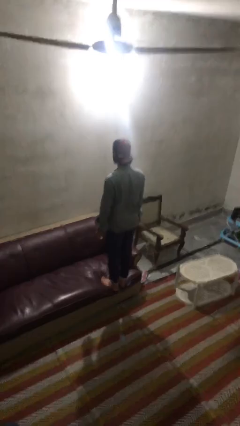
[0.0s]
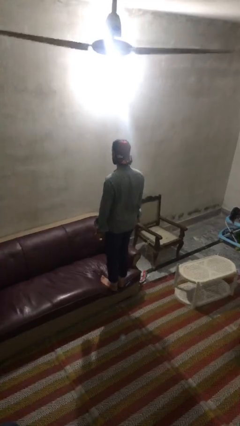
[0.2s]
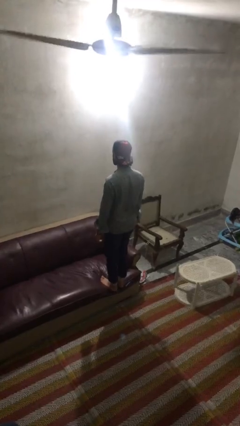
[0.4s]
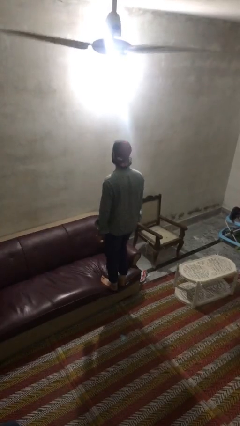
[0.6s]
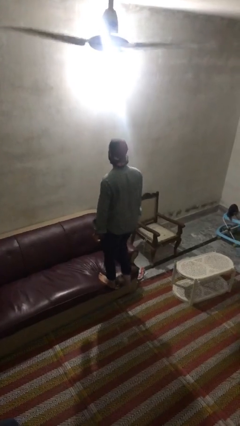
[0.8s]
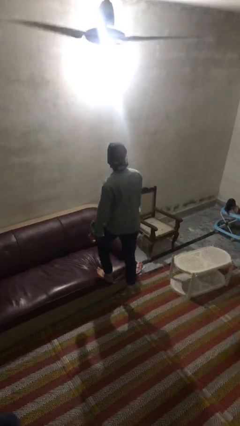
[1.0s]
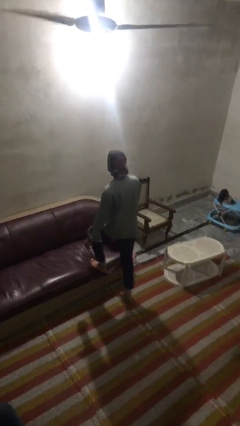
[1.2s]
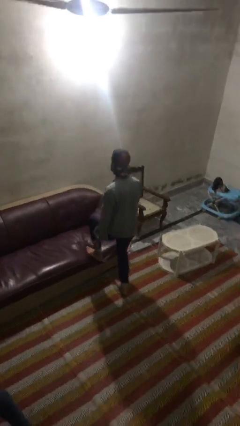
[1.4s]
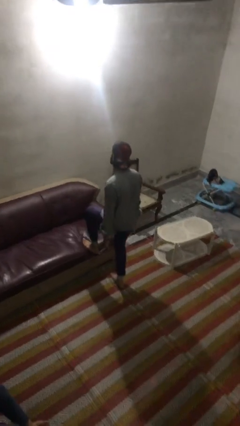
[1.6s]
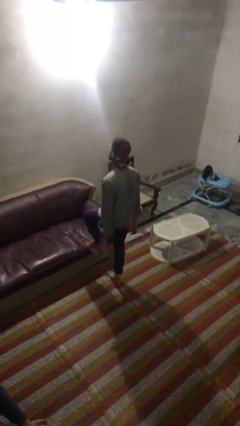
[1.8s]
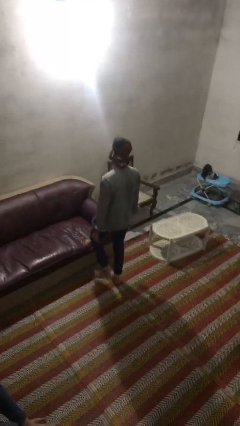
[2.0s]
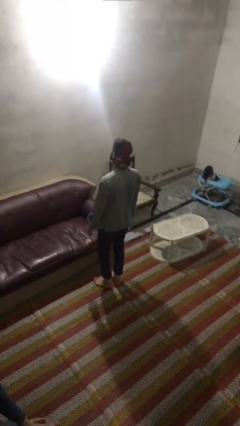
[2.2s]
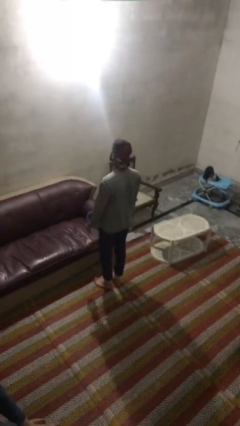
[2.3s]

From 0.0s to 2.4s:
person climbs off couch

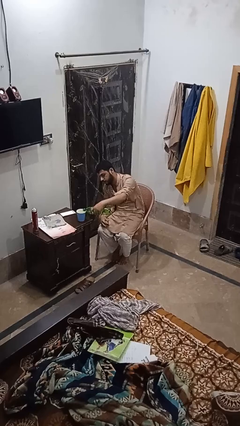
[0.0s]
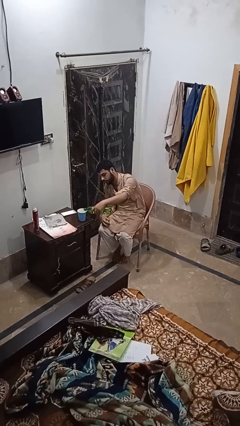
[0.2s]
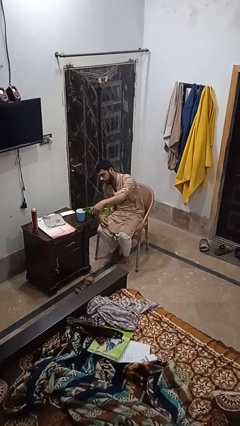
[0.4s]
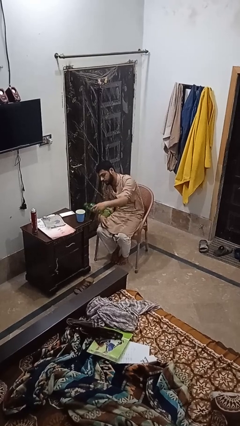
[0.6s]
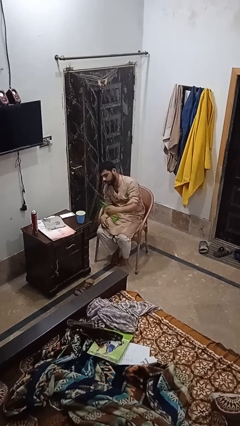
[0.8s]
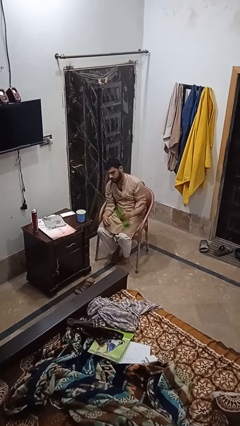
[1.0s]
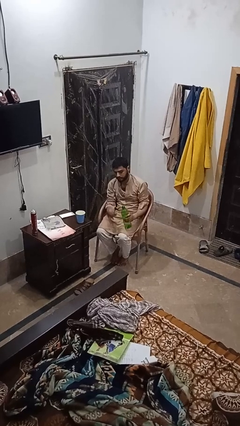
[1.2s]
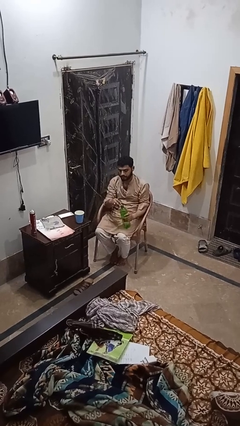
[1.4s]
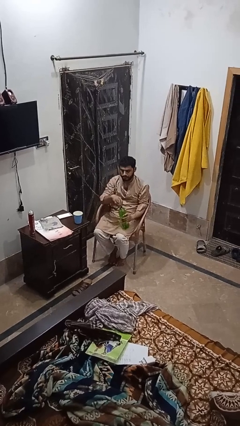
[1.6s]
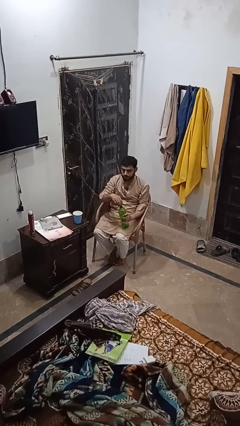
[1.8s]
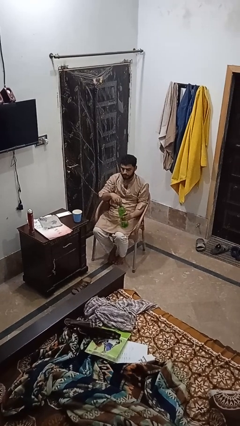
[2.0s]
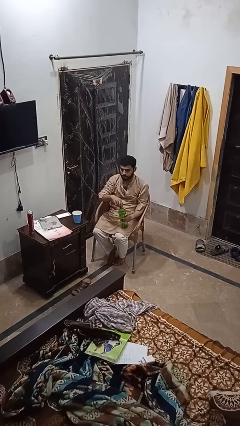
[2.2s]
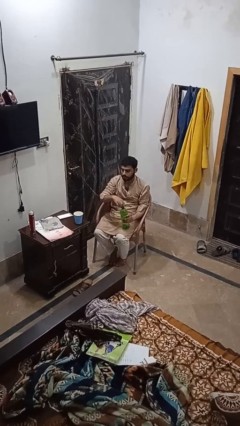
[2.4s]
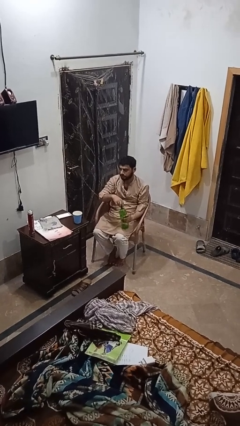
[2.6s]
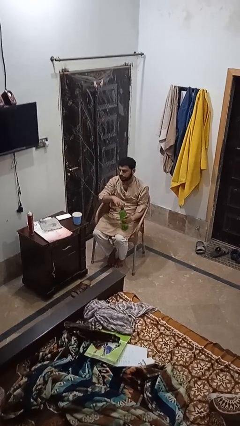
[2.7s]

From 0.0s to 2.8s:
person screws lid to bottle

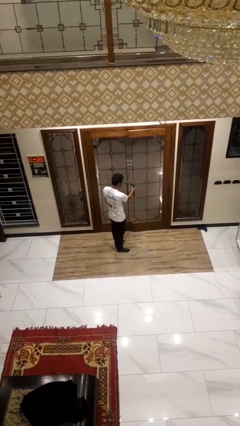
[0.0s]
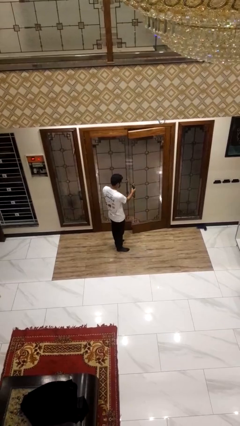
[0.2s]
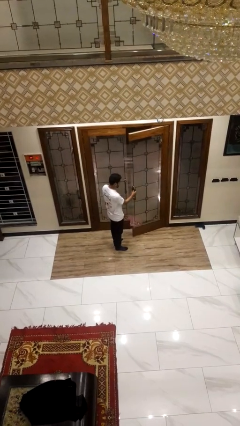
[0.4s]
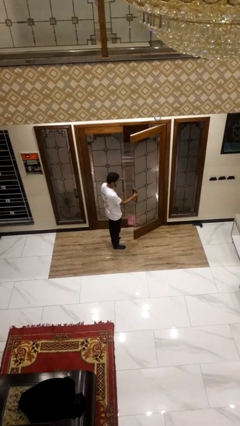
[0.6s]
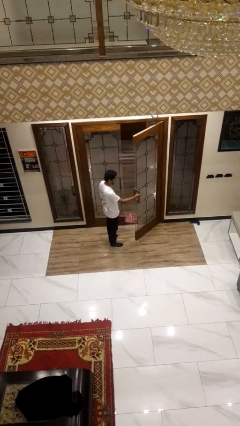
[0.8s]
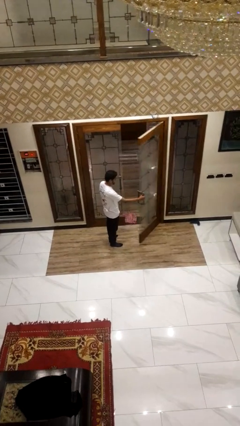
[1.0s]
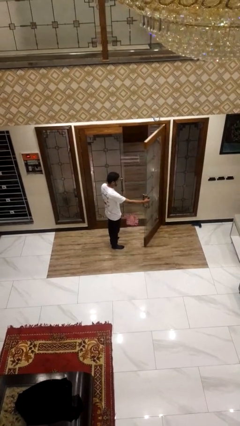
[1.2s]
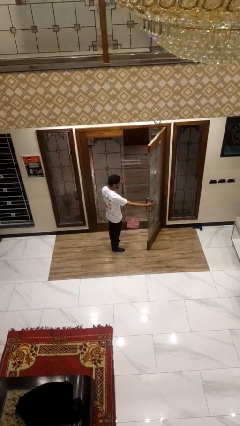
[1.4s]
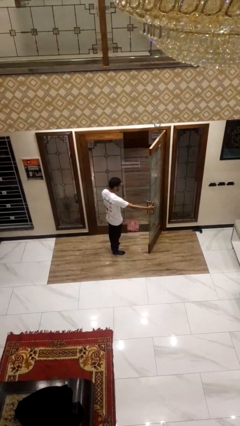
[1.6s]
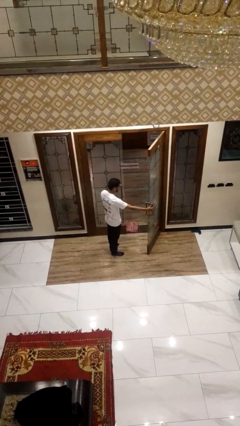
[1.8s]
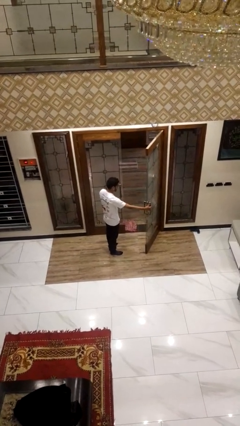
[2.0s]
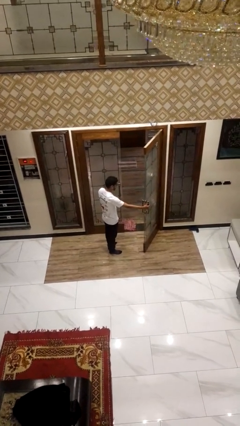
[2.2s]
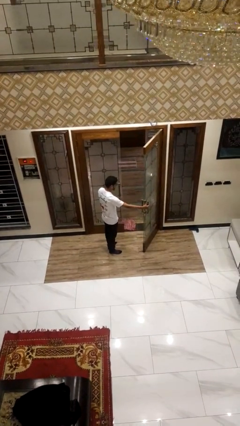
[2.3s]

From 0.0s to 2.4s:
person opens facility door

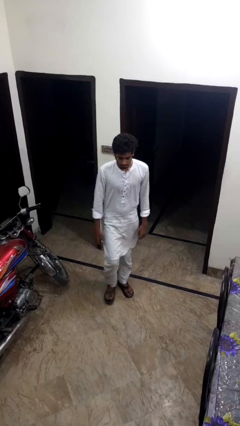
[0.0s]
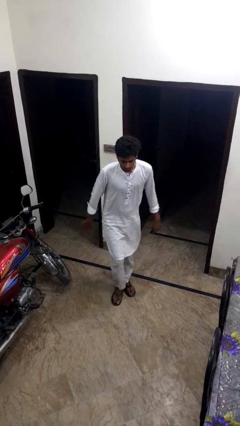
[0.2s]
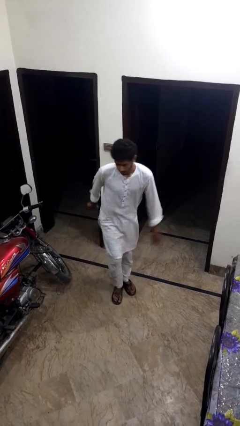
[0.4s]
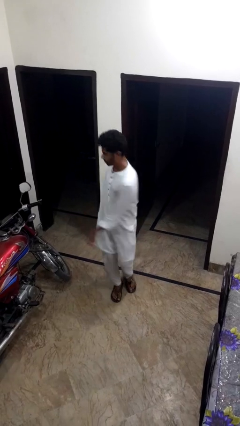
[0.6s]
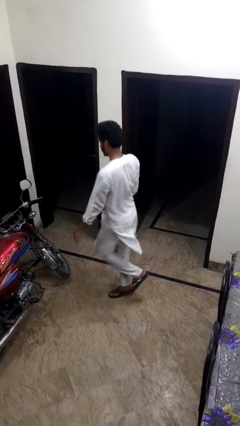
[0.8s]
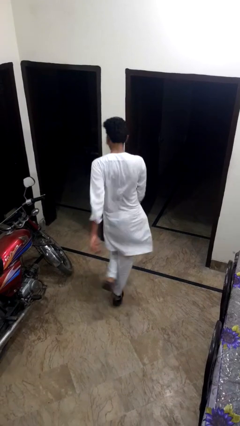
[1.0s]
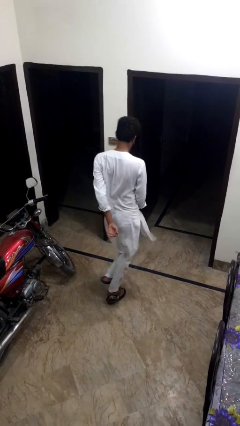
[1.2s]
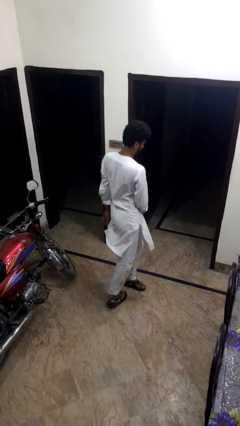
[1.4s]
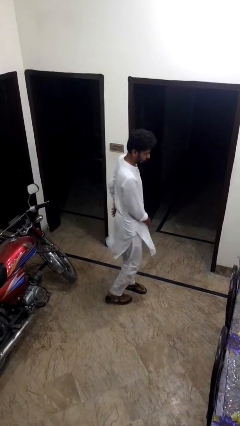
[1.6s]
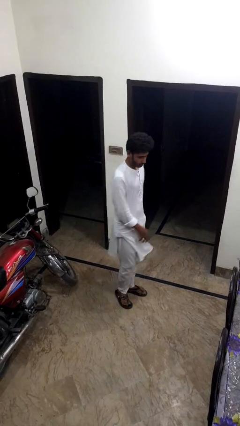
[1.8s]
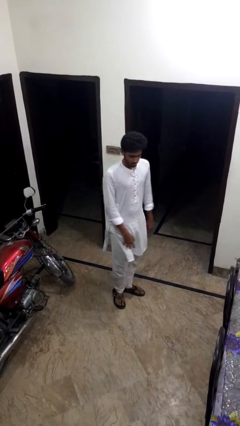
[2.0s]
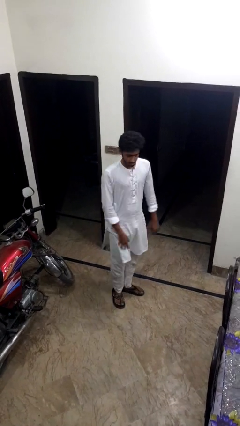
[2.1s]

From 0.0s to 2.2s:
person twirls

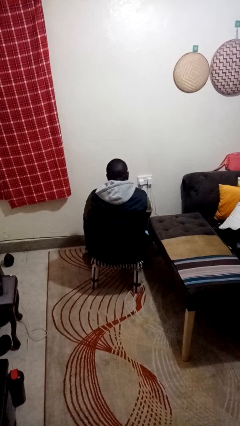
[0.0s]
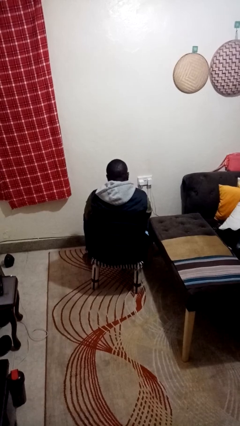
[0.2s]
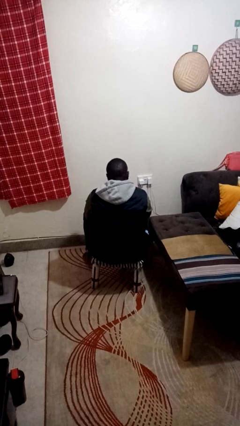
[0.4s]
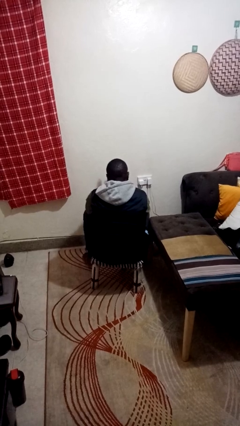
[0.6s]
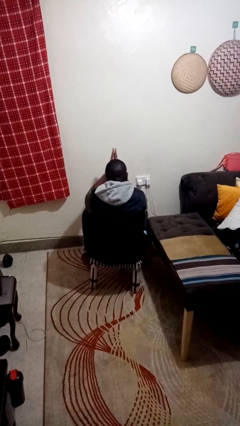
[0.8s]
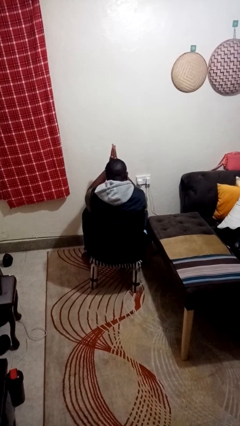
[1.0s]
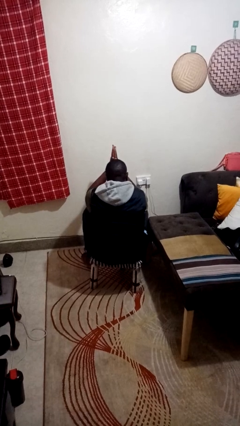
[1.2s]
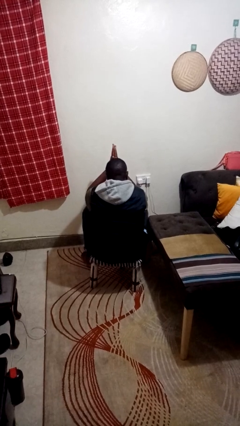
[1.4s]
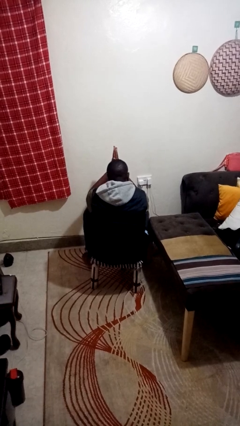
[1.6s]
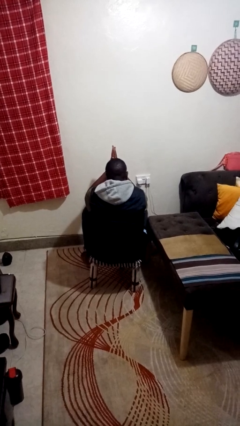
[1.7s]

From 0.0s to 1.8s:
person claps hands

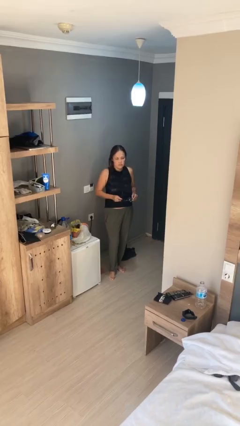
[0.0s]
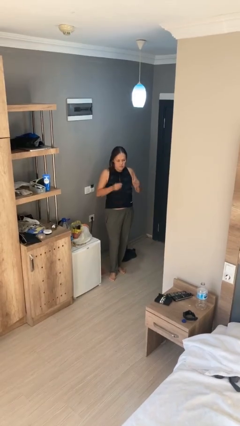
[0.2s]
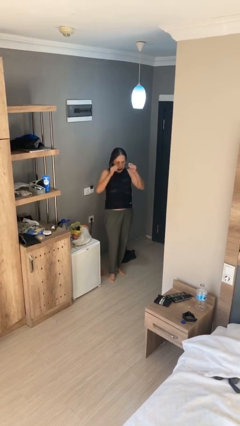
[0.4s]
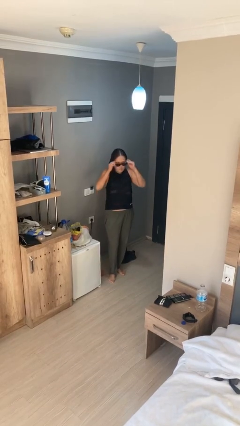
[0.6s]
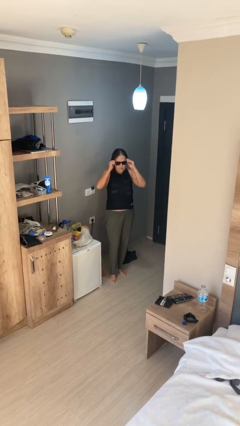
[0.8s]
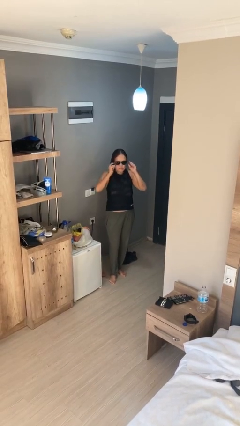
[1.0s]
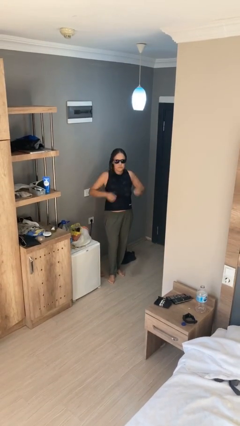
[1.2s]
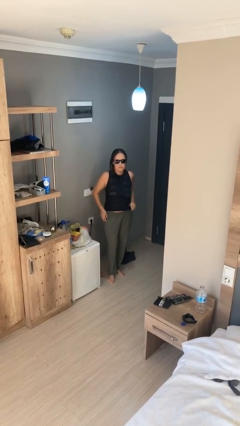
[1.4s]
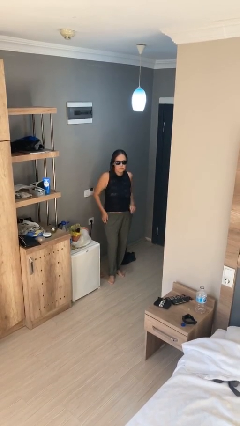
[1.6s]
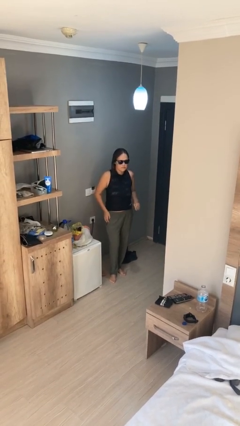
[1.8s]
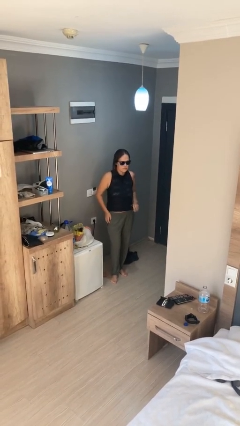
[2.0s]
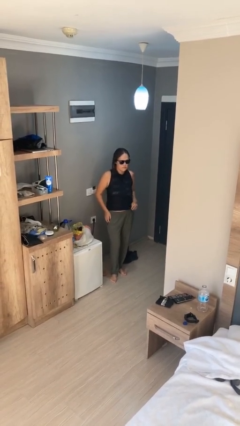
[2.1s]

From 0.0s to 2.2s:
person puts on sunglasses

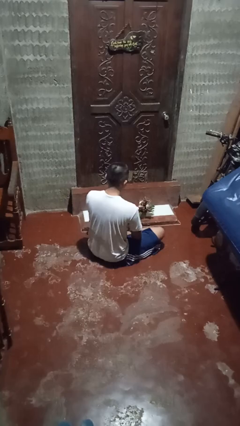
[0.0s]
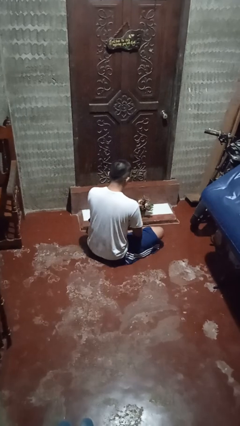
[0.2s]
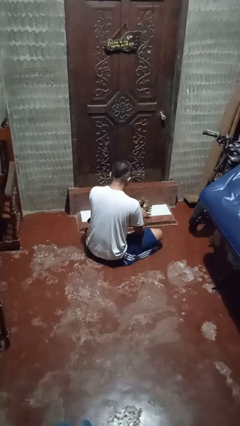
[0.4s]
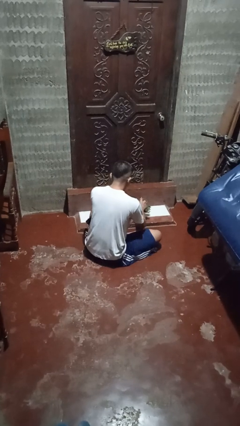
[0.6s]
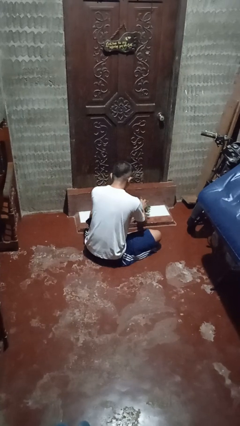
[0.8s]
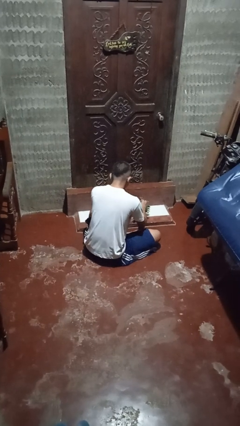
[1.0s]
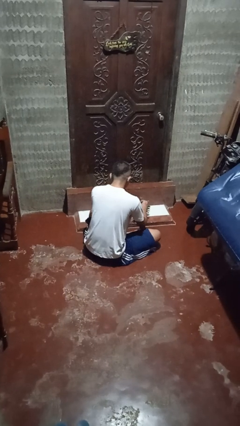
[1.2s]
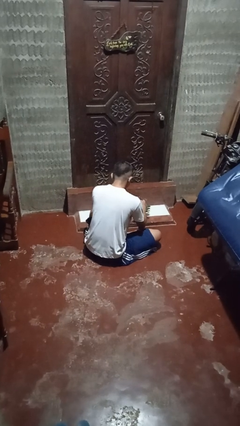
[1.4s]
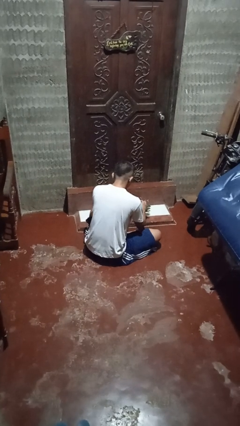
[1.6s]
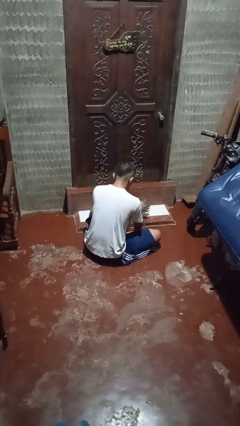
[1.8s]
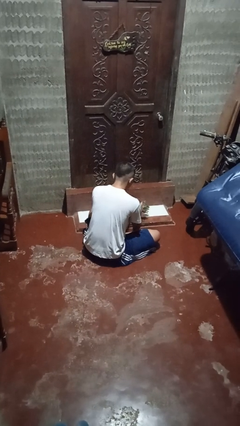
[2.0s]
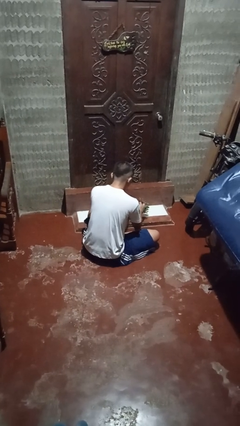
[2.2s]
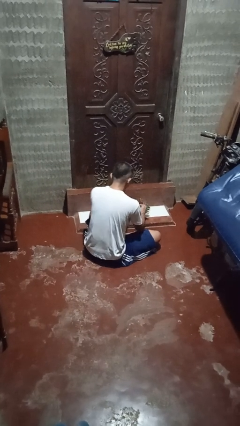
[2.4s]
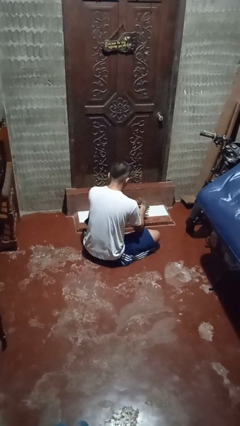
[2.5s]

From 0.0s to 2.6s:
person arranges flowers in vase

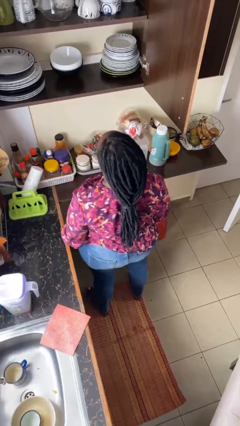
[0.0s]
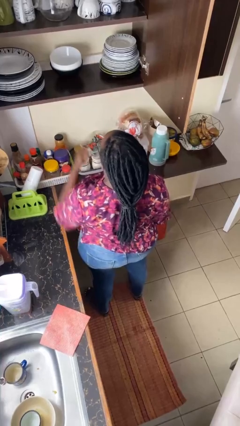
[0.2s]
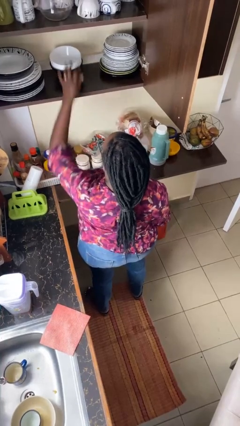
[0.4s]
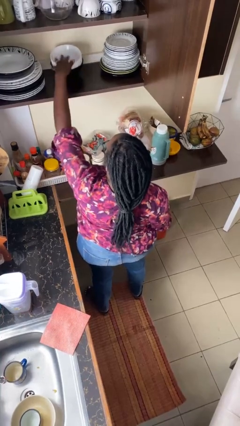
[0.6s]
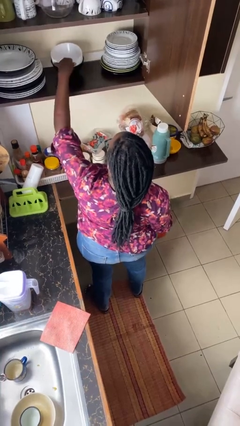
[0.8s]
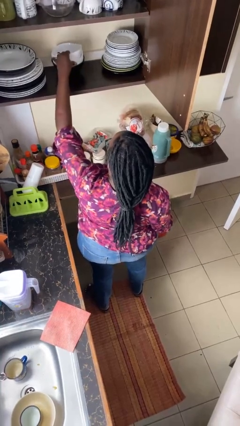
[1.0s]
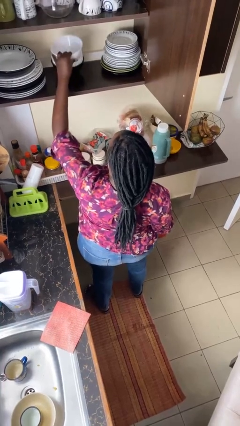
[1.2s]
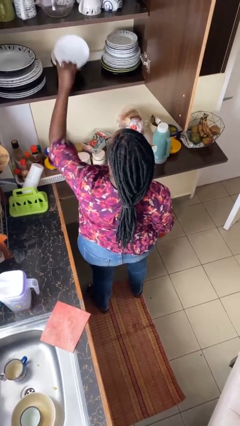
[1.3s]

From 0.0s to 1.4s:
person takes object from cabinet
